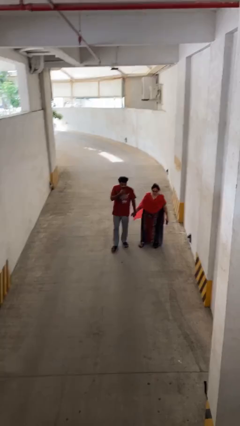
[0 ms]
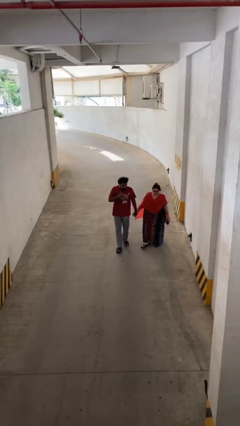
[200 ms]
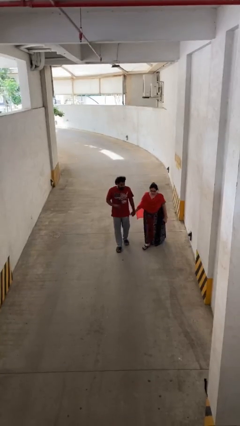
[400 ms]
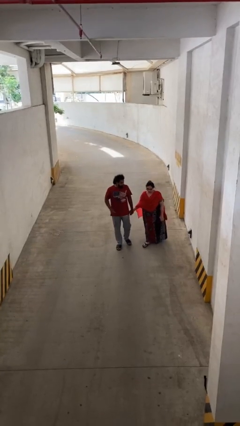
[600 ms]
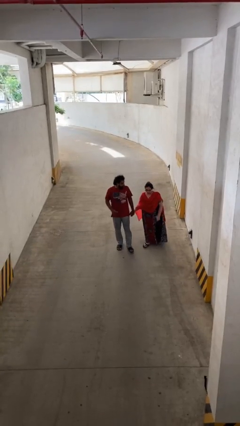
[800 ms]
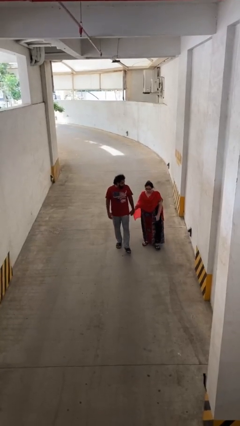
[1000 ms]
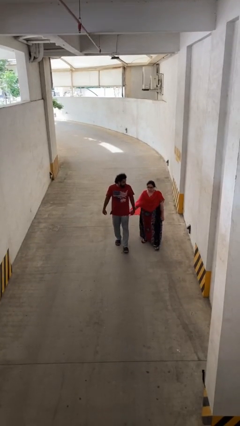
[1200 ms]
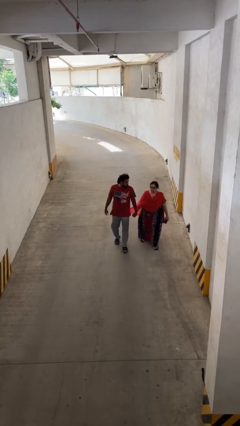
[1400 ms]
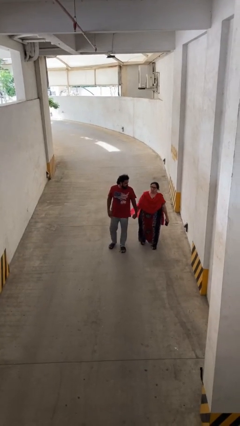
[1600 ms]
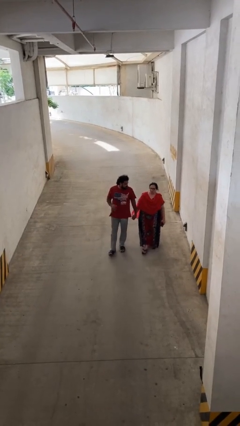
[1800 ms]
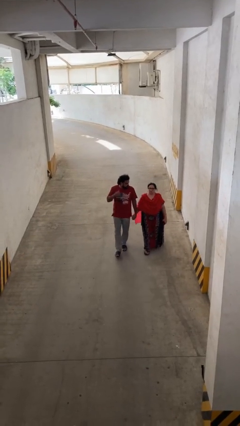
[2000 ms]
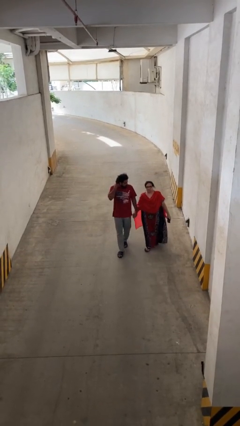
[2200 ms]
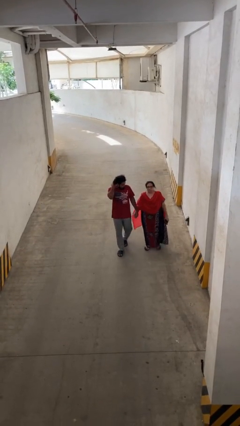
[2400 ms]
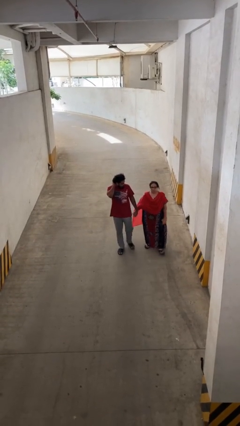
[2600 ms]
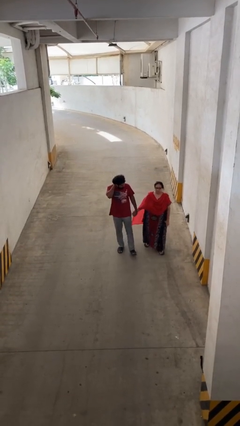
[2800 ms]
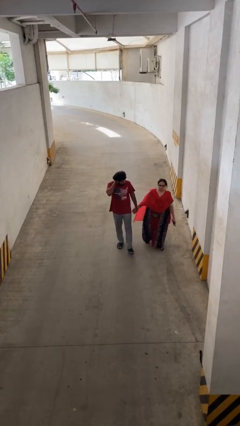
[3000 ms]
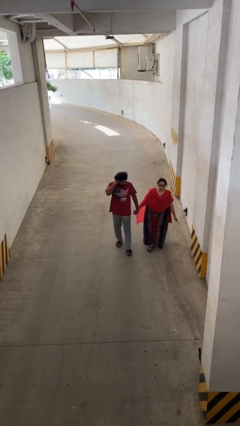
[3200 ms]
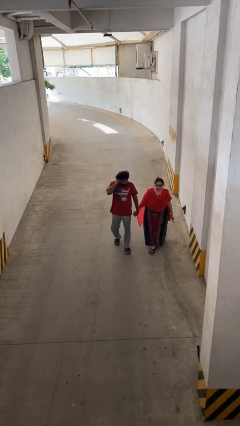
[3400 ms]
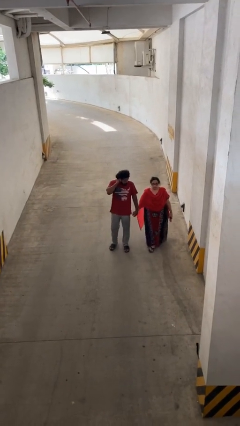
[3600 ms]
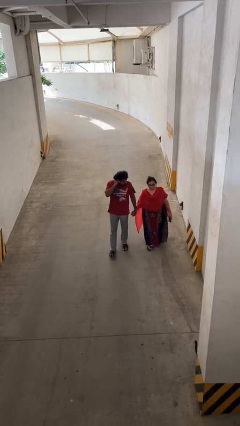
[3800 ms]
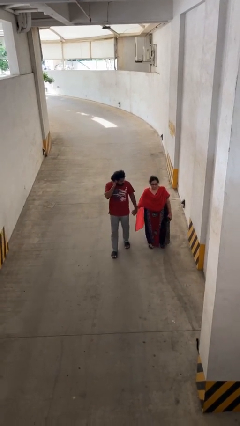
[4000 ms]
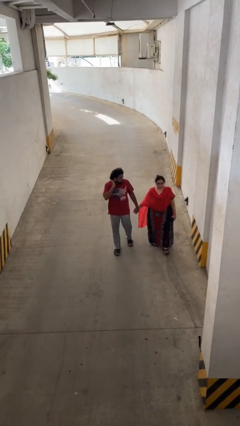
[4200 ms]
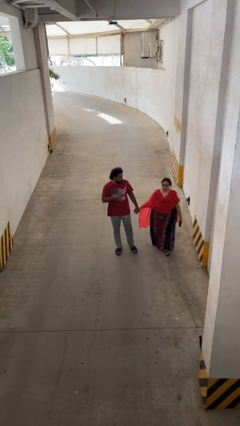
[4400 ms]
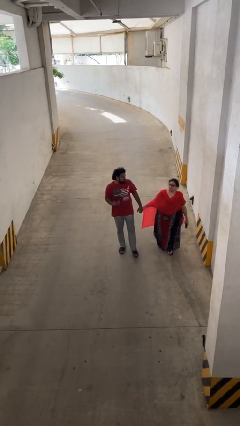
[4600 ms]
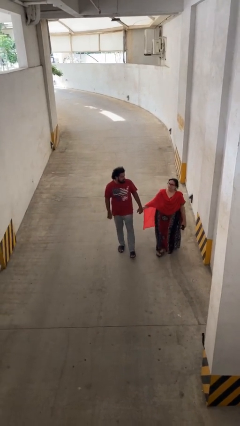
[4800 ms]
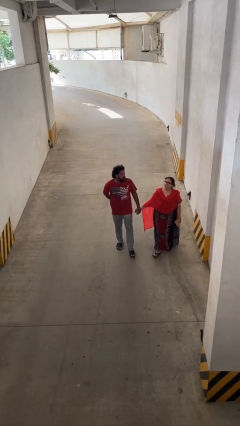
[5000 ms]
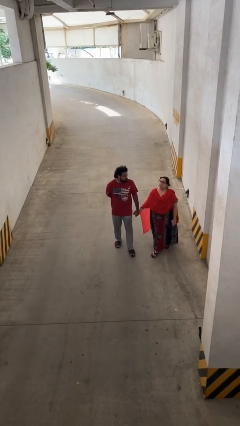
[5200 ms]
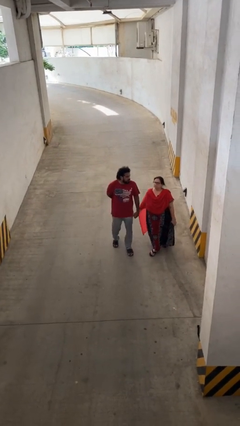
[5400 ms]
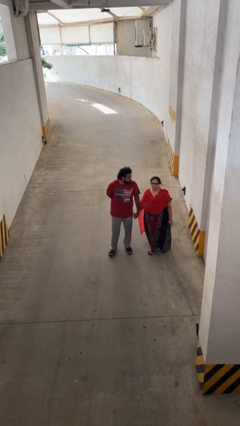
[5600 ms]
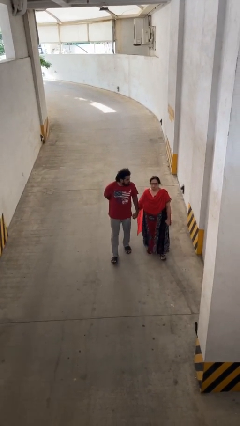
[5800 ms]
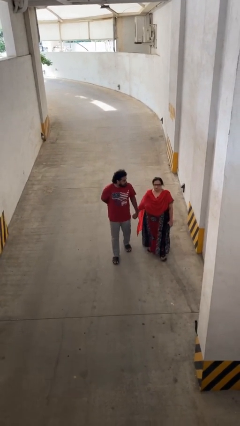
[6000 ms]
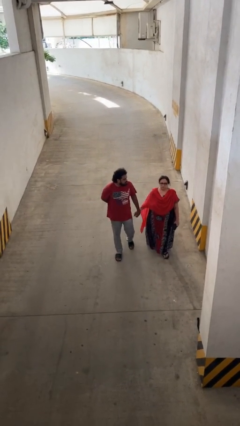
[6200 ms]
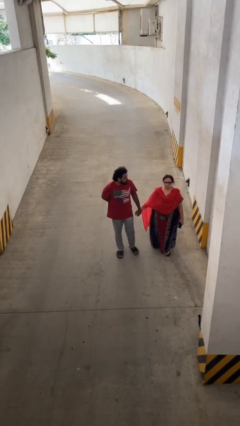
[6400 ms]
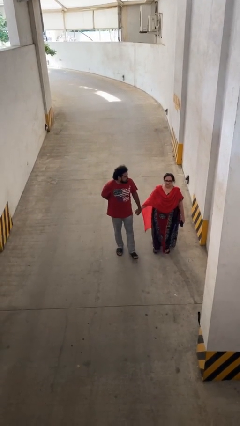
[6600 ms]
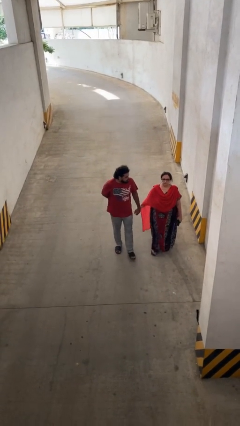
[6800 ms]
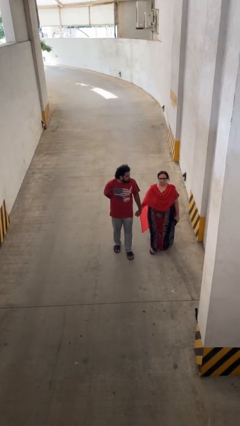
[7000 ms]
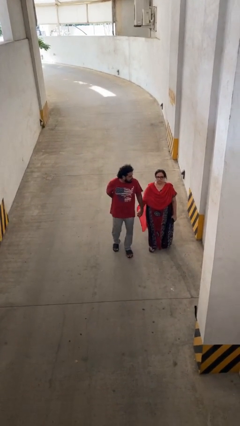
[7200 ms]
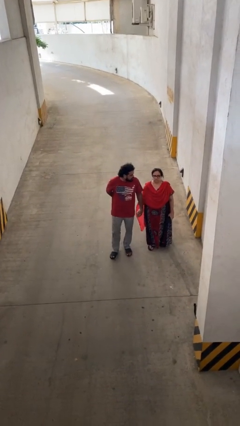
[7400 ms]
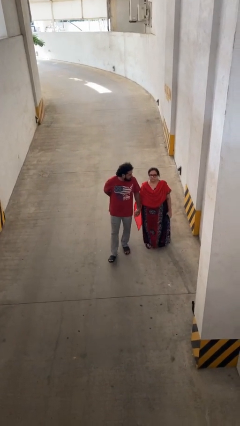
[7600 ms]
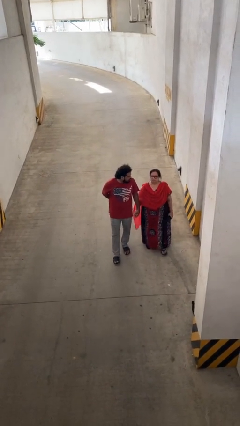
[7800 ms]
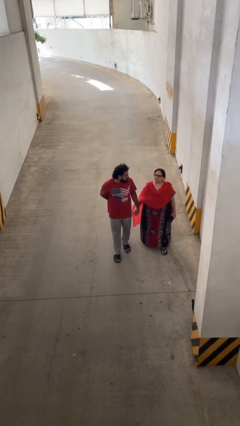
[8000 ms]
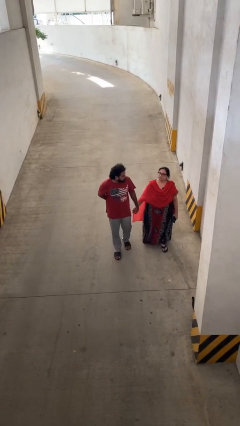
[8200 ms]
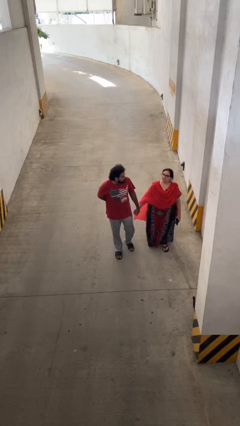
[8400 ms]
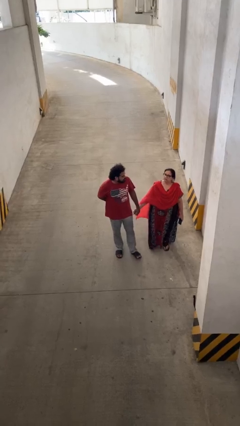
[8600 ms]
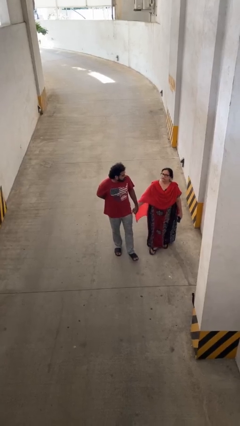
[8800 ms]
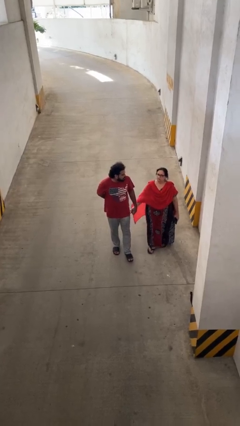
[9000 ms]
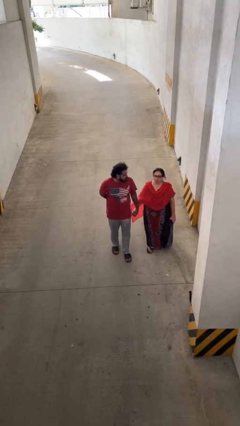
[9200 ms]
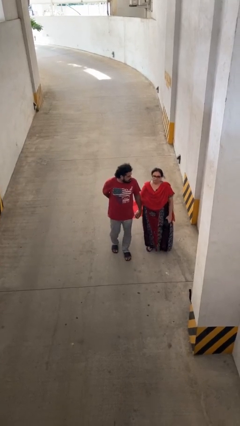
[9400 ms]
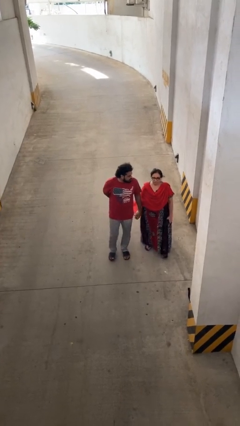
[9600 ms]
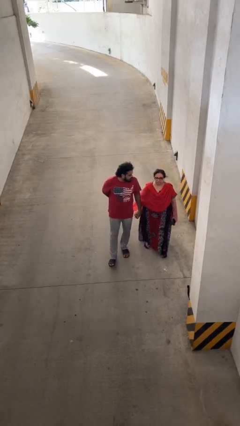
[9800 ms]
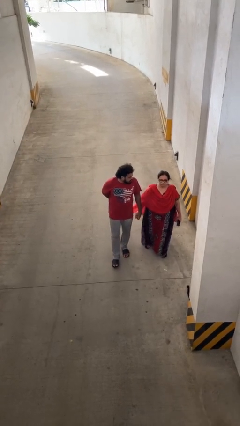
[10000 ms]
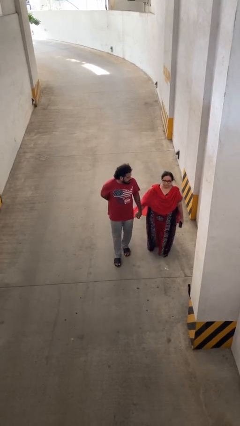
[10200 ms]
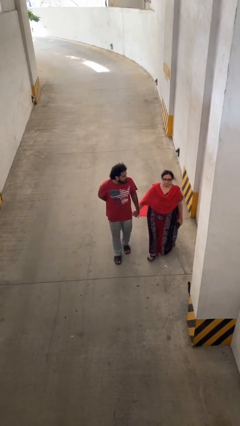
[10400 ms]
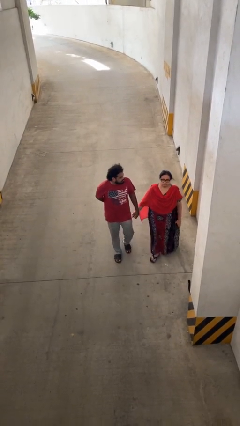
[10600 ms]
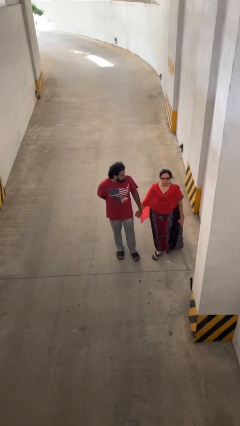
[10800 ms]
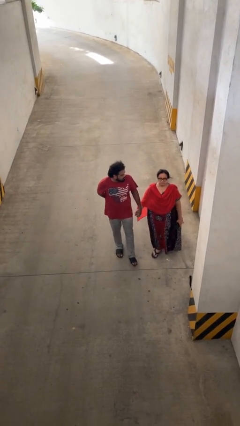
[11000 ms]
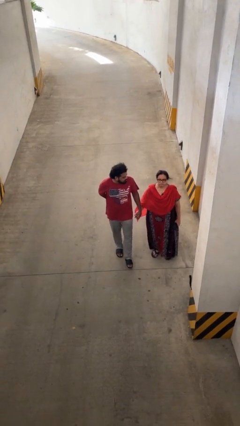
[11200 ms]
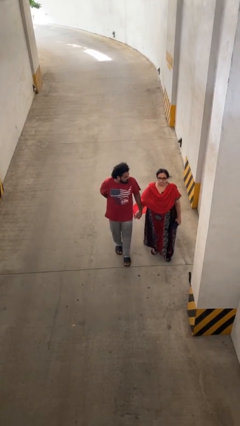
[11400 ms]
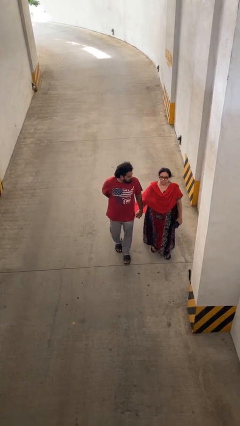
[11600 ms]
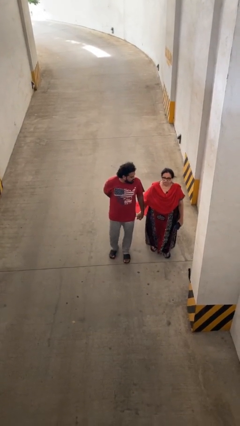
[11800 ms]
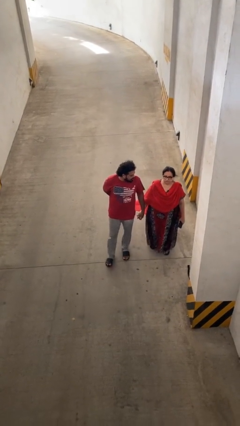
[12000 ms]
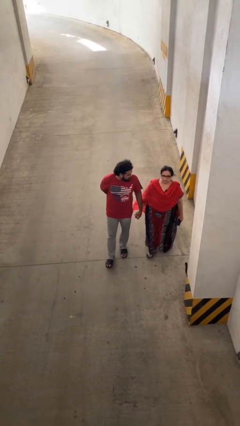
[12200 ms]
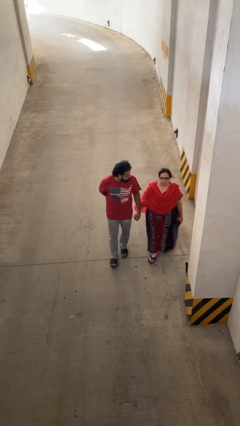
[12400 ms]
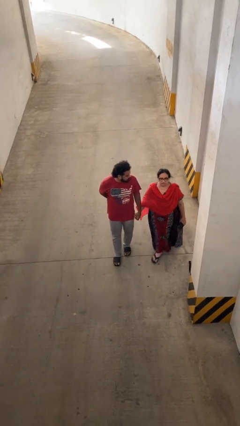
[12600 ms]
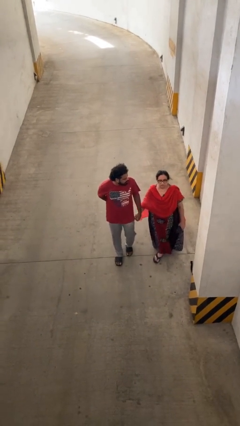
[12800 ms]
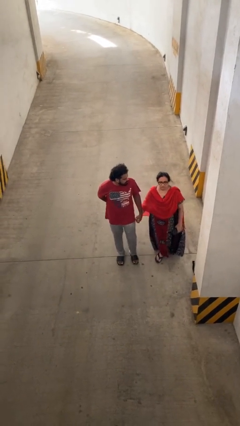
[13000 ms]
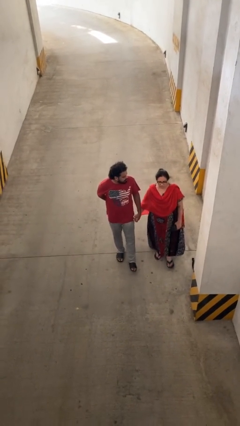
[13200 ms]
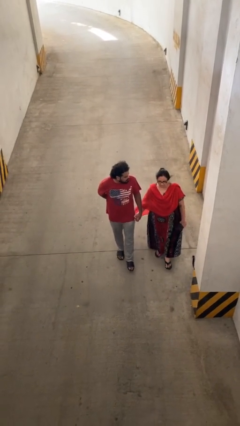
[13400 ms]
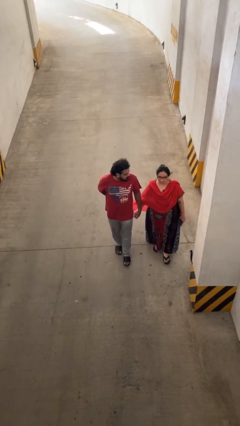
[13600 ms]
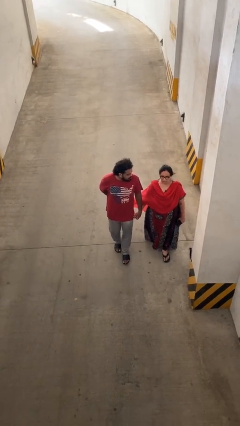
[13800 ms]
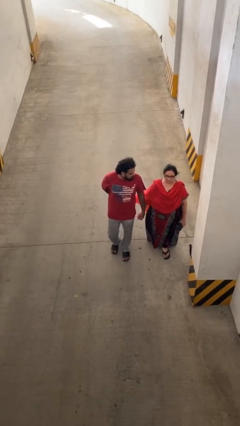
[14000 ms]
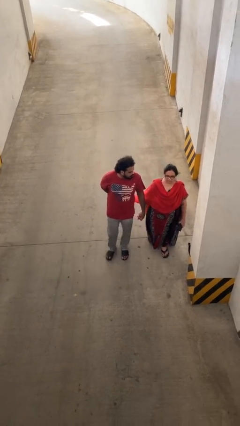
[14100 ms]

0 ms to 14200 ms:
person holds hand

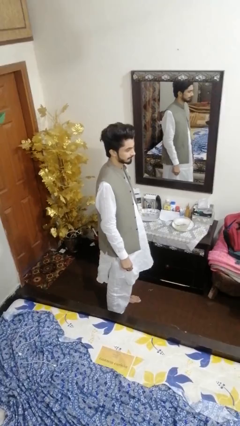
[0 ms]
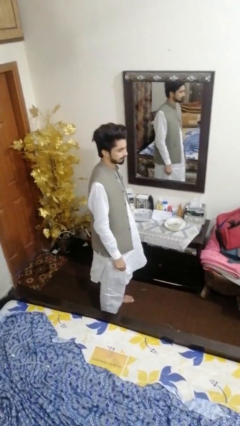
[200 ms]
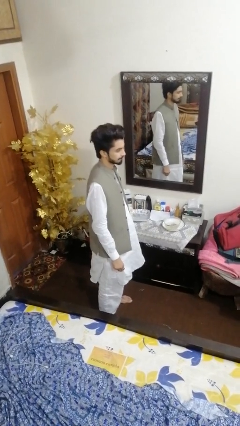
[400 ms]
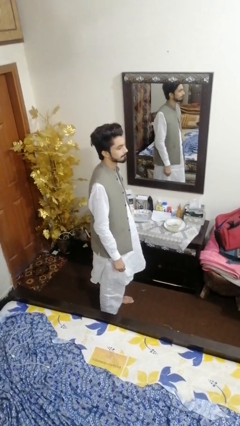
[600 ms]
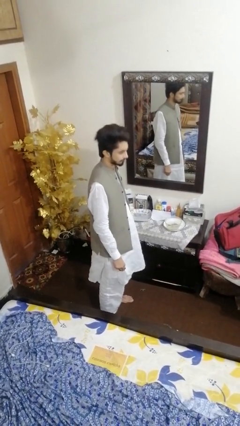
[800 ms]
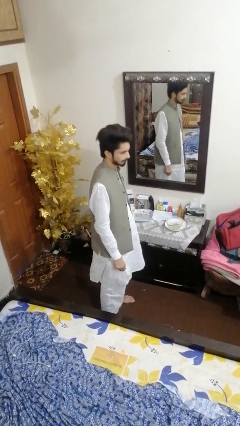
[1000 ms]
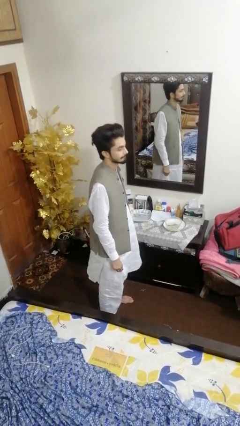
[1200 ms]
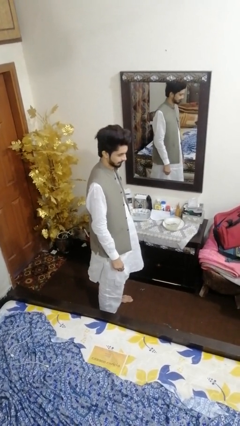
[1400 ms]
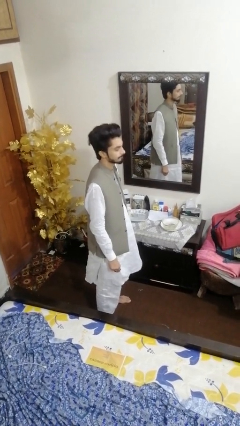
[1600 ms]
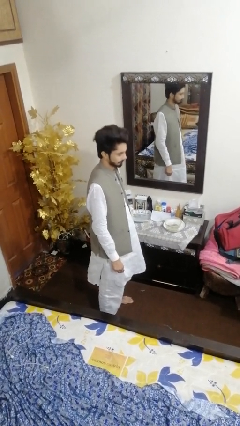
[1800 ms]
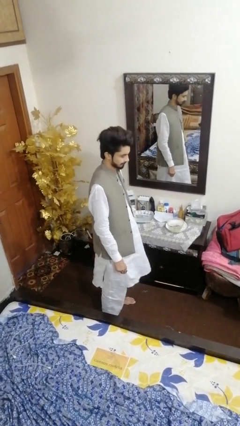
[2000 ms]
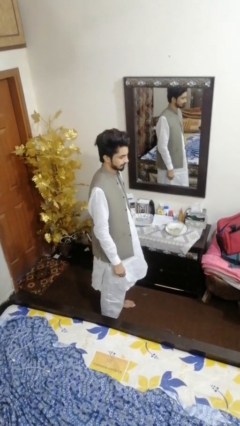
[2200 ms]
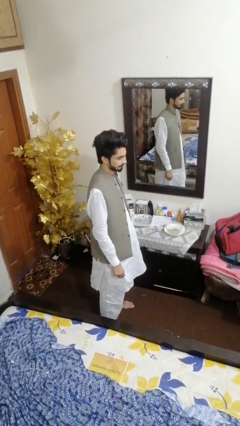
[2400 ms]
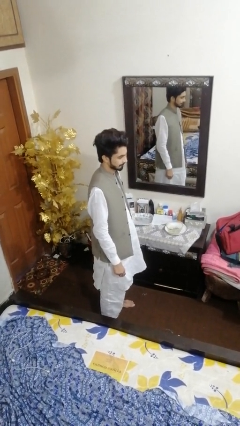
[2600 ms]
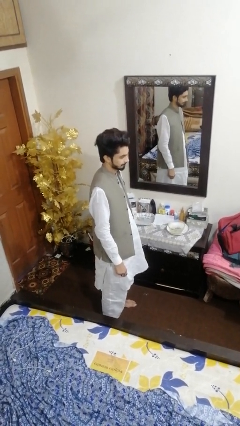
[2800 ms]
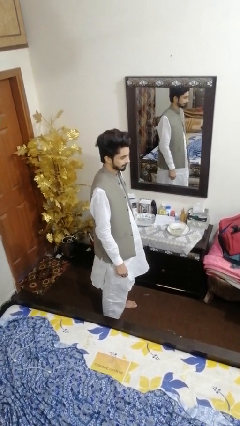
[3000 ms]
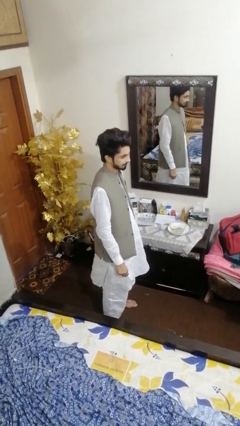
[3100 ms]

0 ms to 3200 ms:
person nods head

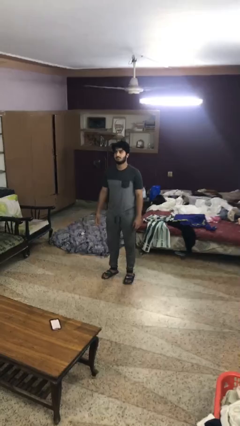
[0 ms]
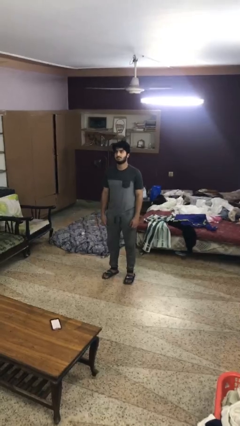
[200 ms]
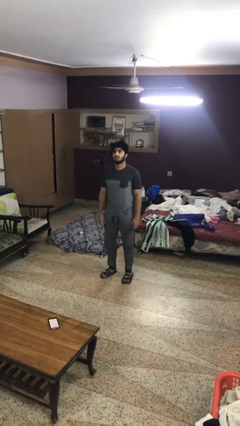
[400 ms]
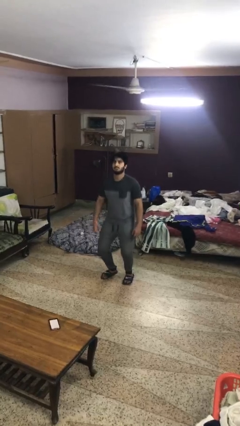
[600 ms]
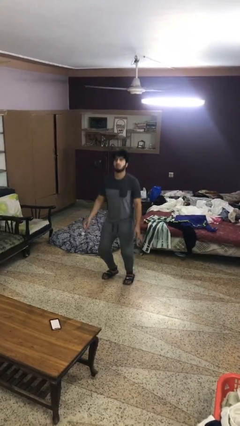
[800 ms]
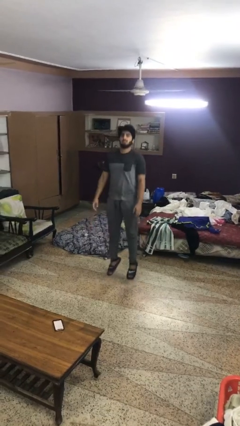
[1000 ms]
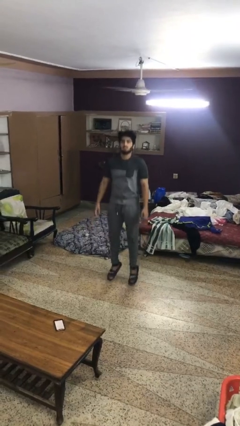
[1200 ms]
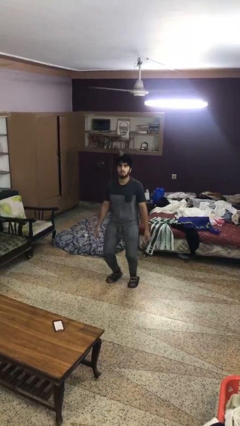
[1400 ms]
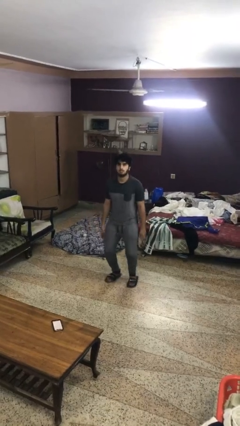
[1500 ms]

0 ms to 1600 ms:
person jumps
